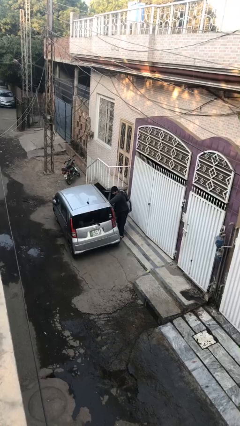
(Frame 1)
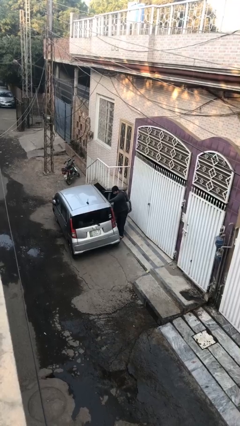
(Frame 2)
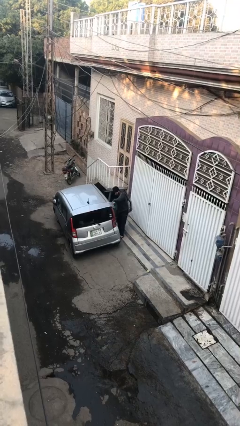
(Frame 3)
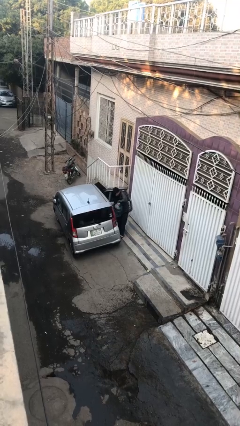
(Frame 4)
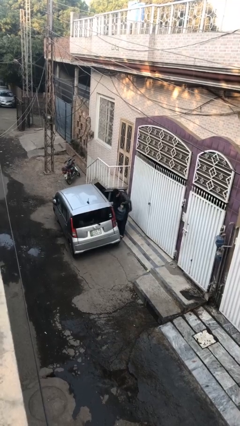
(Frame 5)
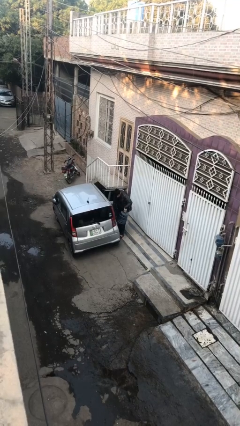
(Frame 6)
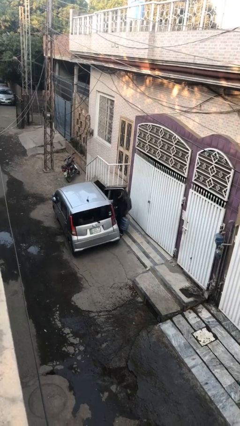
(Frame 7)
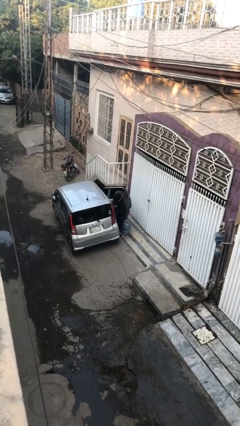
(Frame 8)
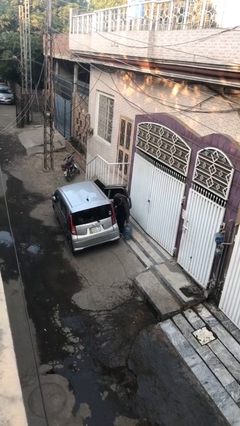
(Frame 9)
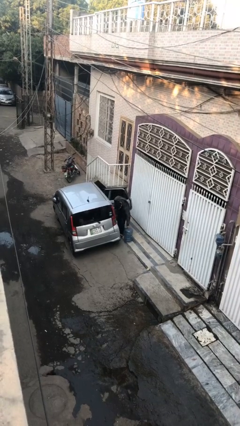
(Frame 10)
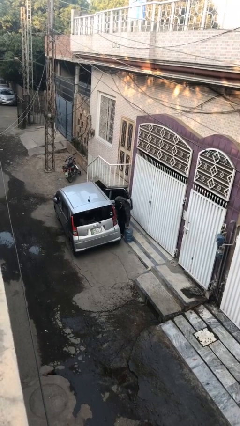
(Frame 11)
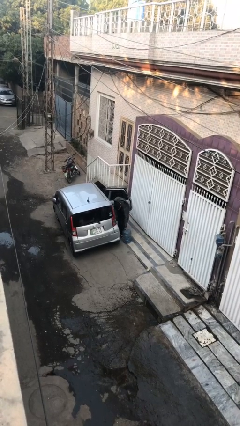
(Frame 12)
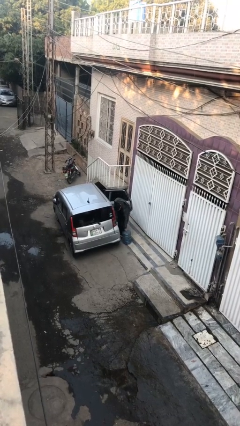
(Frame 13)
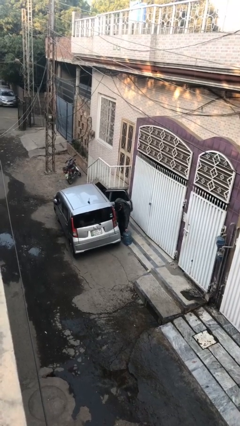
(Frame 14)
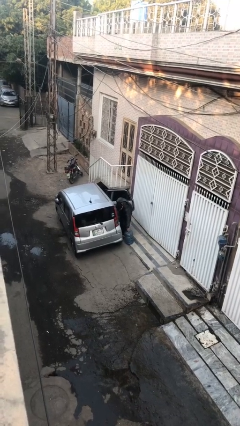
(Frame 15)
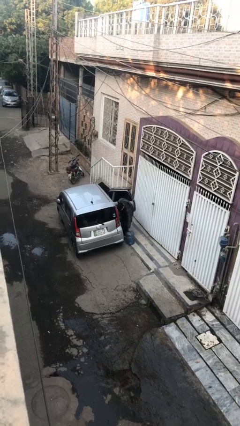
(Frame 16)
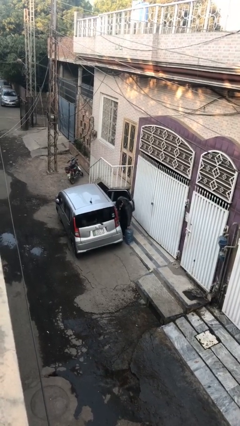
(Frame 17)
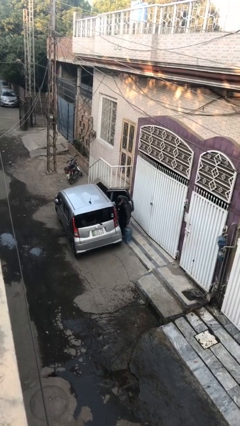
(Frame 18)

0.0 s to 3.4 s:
person unloads car

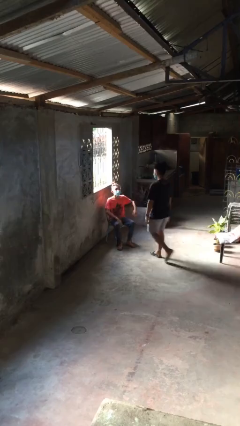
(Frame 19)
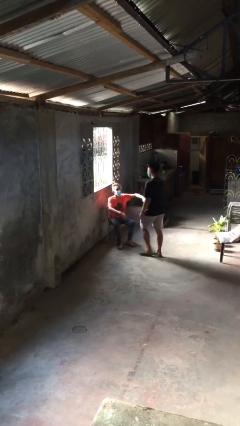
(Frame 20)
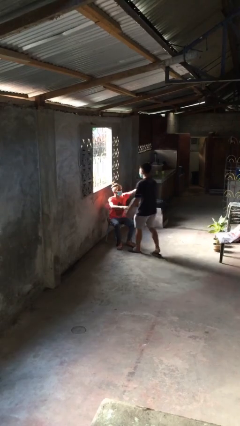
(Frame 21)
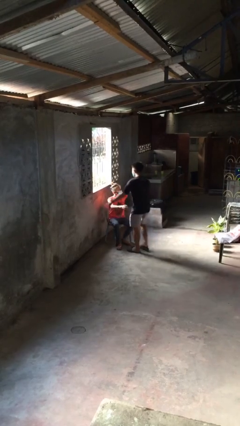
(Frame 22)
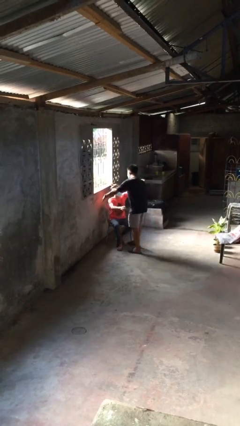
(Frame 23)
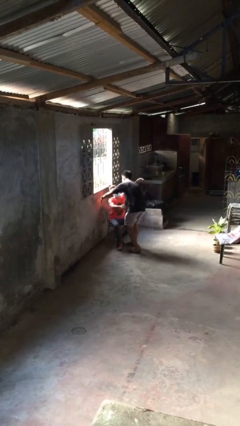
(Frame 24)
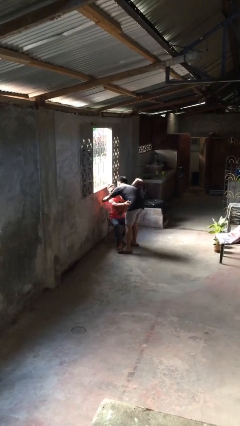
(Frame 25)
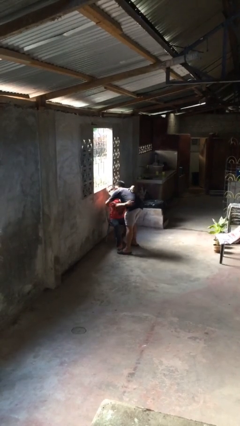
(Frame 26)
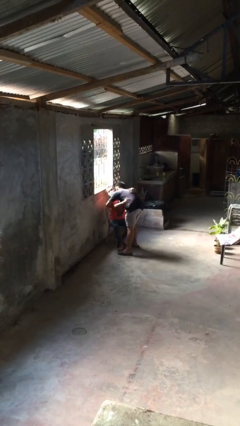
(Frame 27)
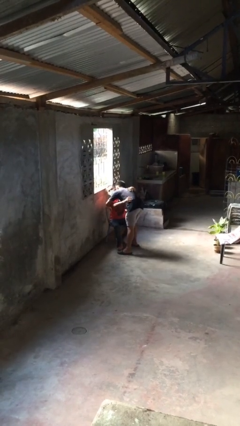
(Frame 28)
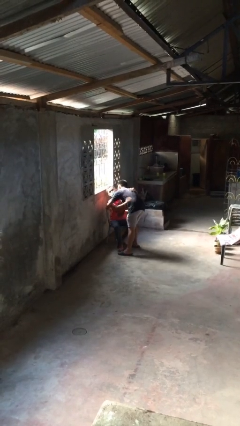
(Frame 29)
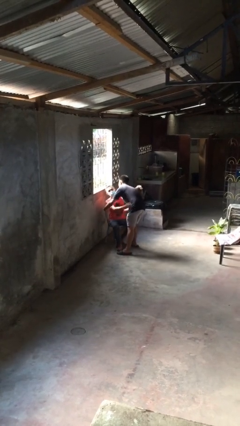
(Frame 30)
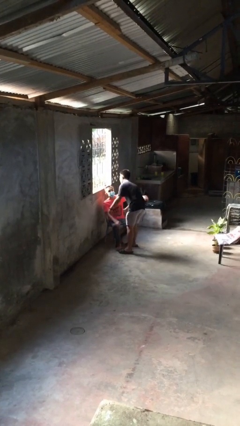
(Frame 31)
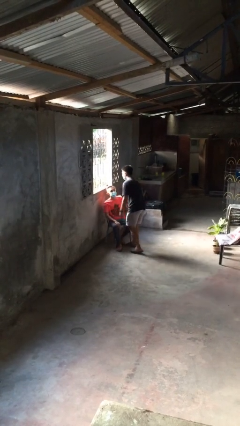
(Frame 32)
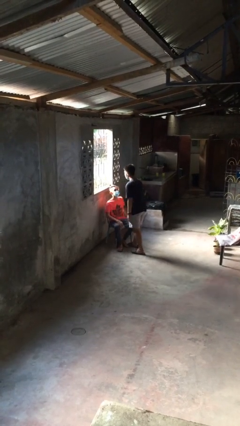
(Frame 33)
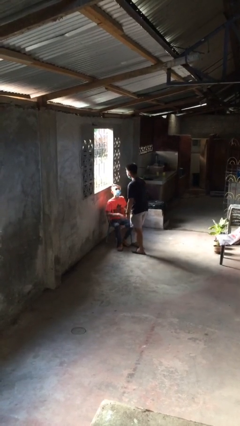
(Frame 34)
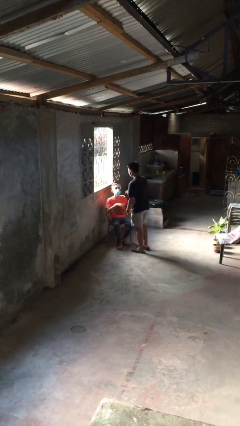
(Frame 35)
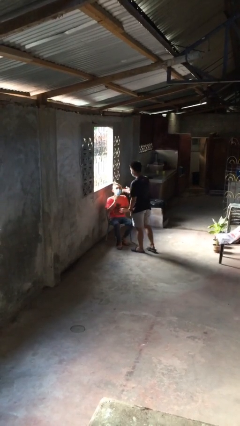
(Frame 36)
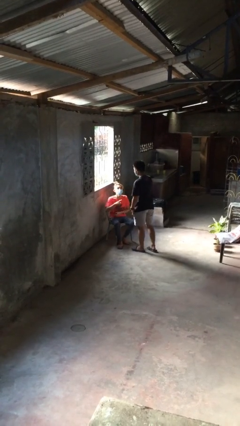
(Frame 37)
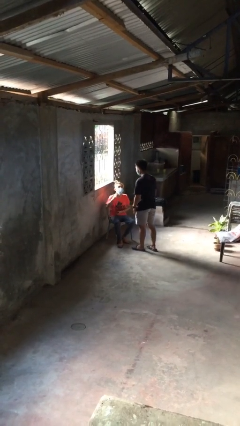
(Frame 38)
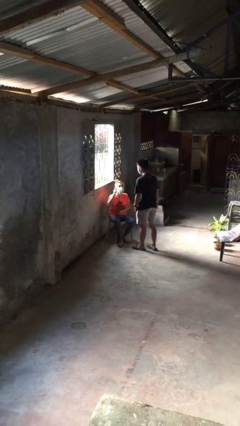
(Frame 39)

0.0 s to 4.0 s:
person embraces person

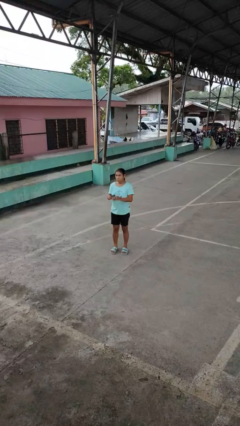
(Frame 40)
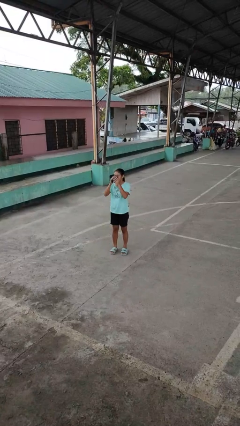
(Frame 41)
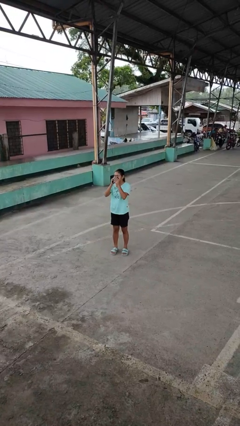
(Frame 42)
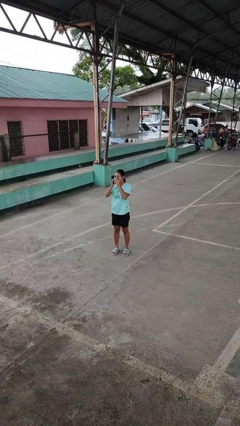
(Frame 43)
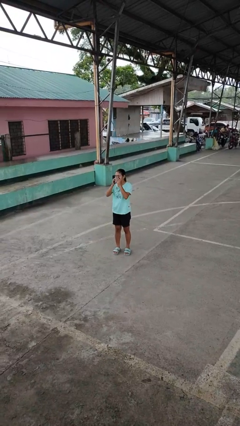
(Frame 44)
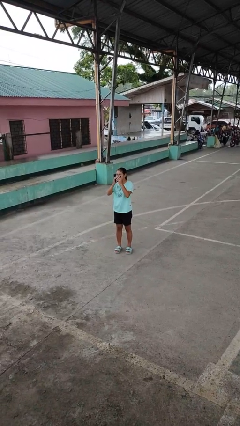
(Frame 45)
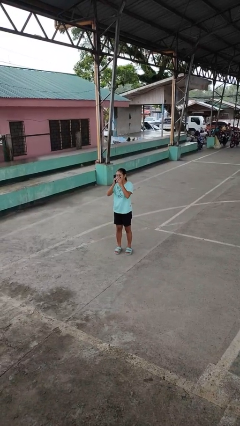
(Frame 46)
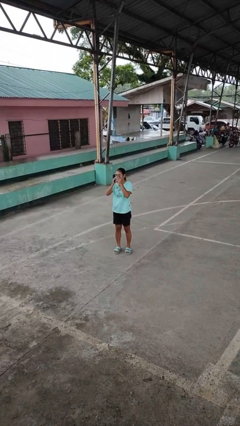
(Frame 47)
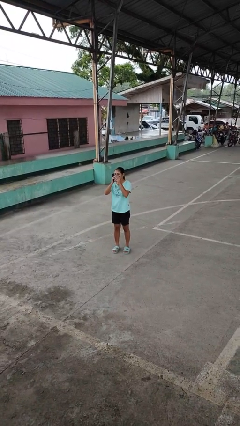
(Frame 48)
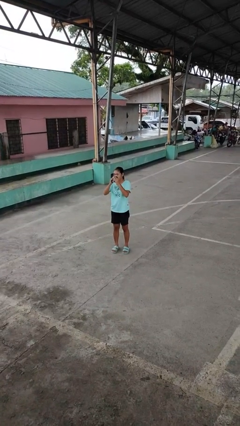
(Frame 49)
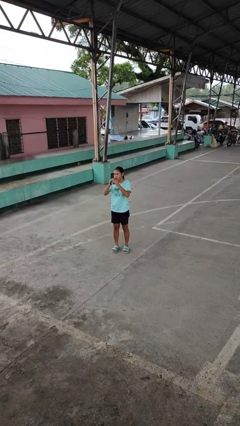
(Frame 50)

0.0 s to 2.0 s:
person blows nose

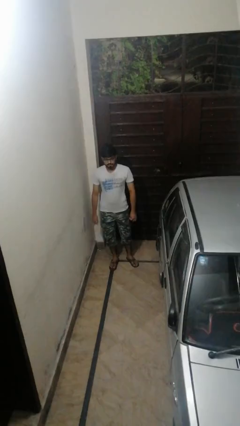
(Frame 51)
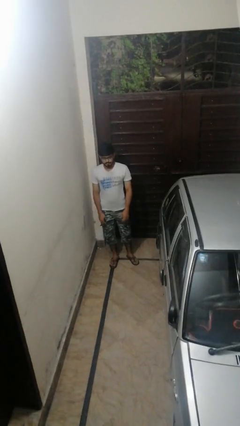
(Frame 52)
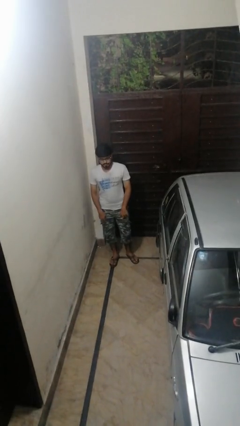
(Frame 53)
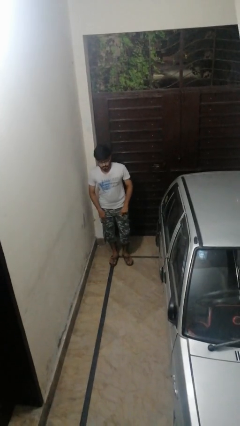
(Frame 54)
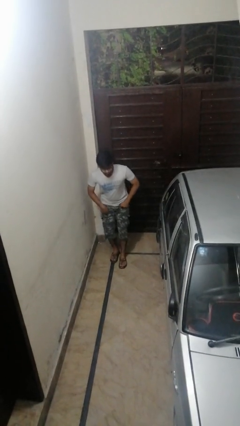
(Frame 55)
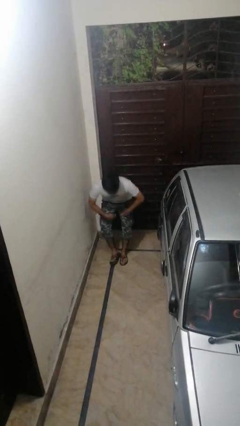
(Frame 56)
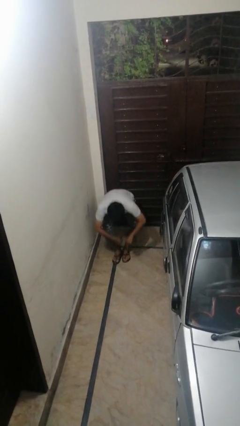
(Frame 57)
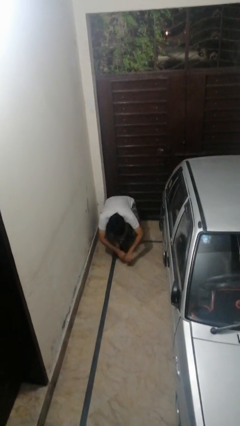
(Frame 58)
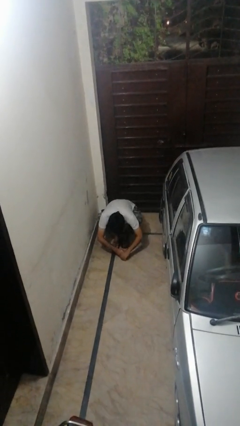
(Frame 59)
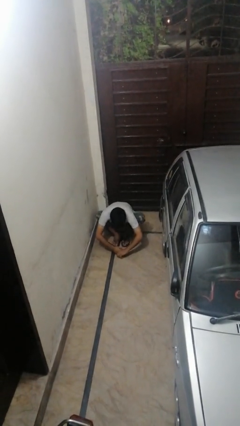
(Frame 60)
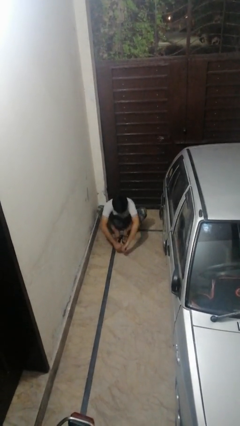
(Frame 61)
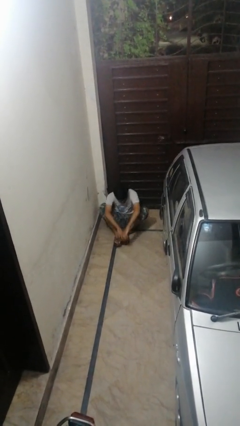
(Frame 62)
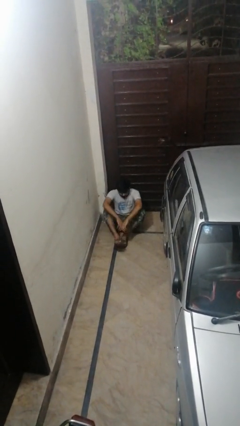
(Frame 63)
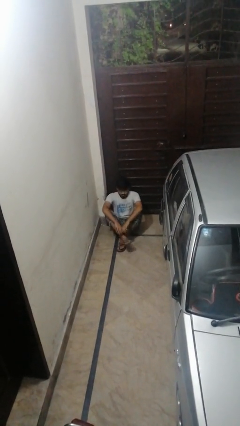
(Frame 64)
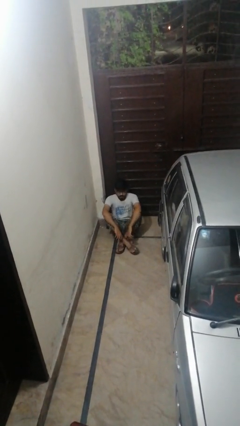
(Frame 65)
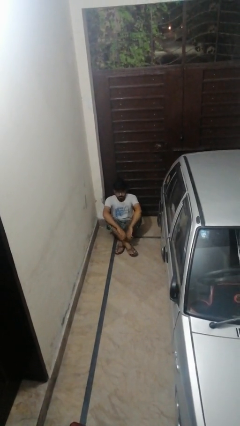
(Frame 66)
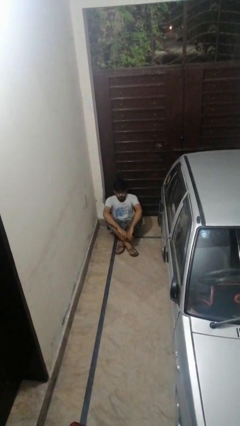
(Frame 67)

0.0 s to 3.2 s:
person sits crisscross

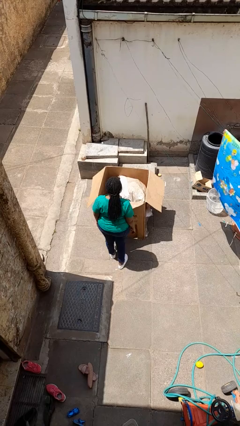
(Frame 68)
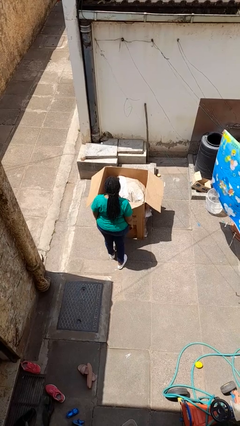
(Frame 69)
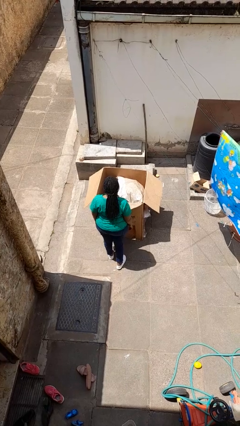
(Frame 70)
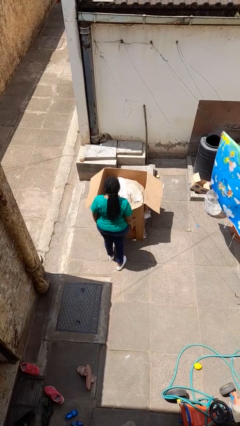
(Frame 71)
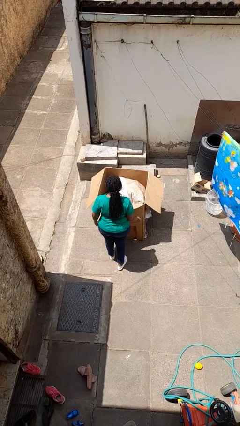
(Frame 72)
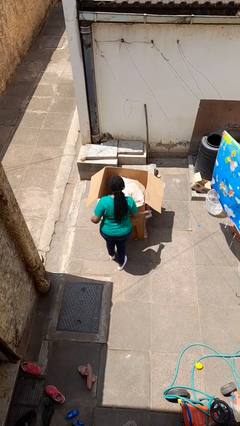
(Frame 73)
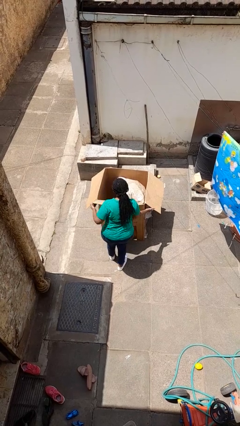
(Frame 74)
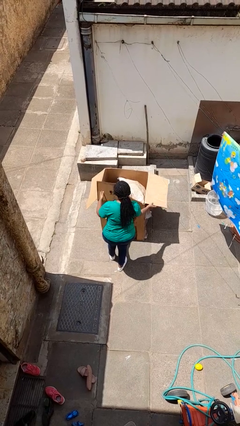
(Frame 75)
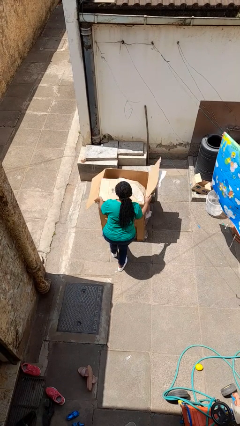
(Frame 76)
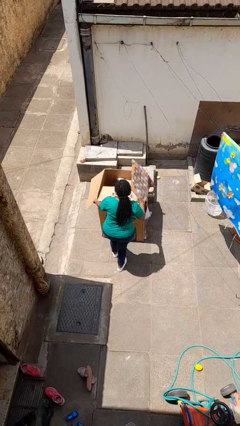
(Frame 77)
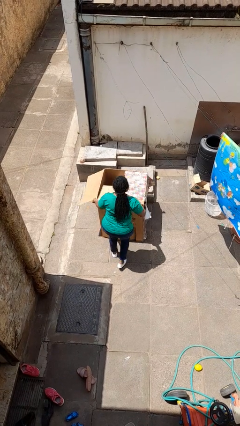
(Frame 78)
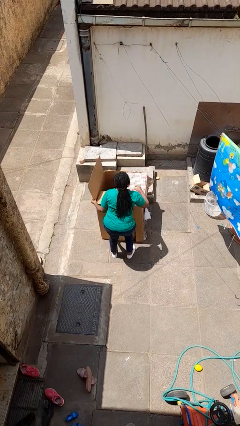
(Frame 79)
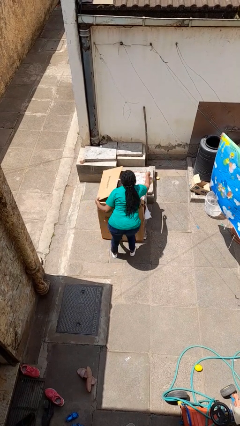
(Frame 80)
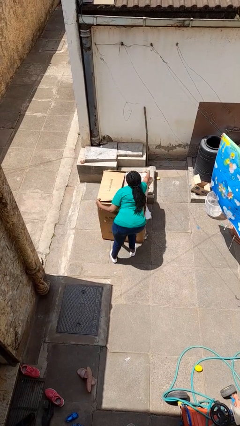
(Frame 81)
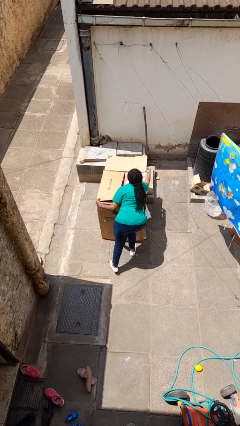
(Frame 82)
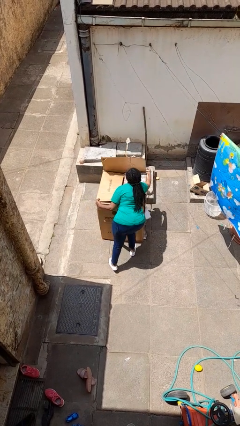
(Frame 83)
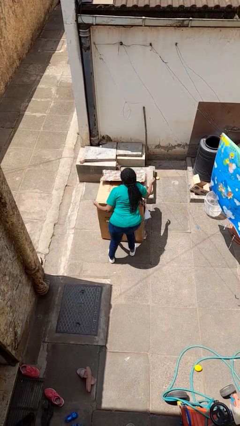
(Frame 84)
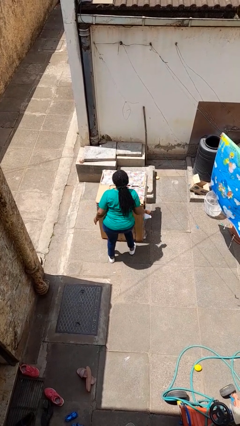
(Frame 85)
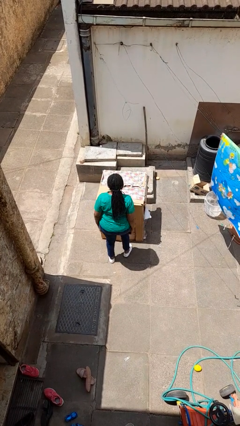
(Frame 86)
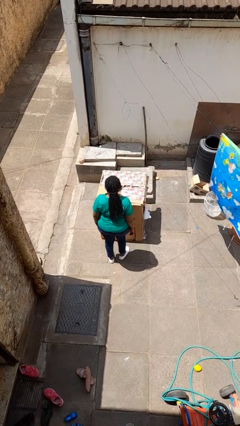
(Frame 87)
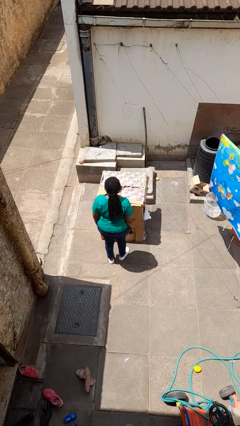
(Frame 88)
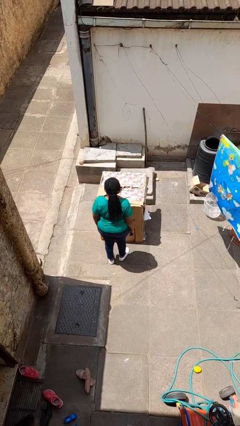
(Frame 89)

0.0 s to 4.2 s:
person closes box

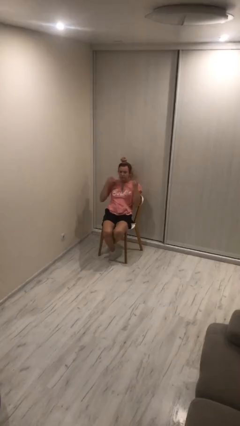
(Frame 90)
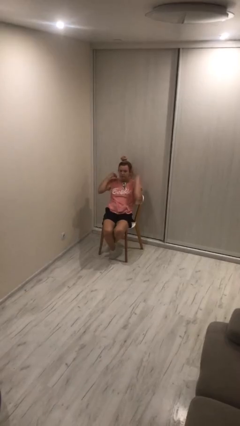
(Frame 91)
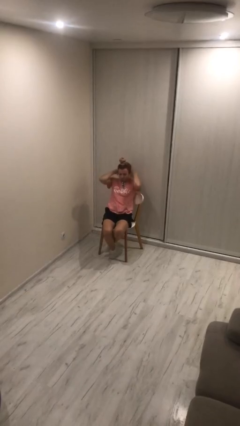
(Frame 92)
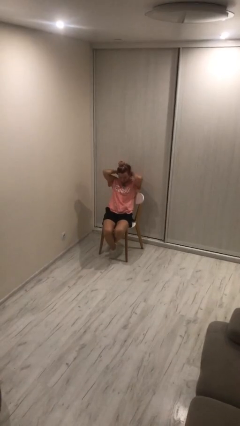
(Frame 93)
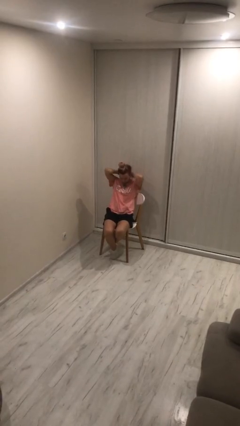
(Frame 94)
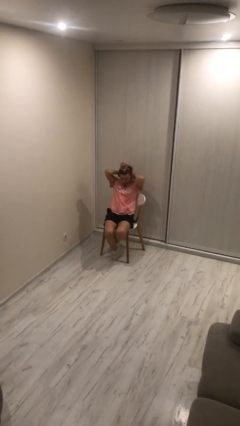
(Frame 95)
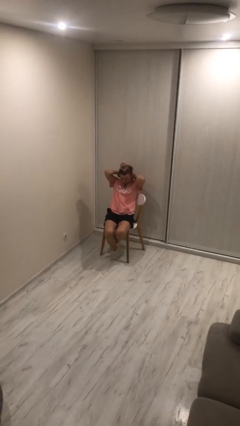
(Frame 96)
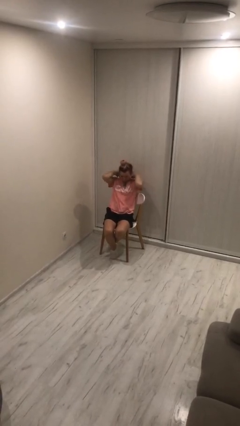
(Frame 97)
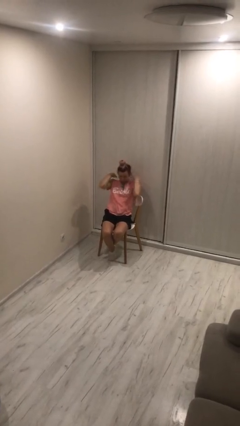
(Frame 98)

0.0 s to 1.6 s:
person puts on necklace
